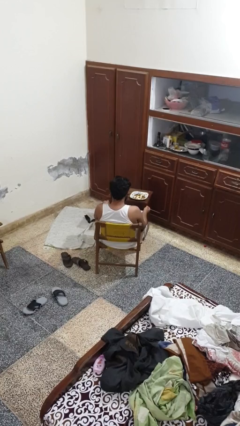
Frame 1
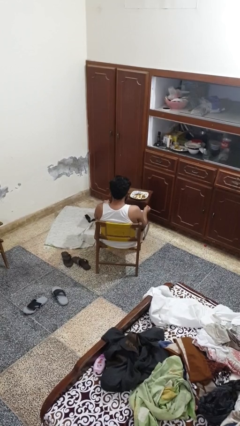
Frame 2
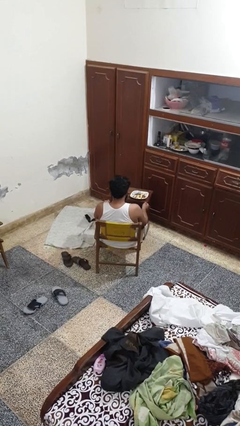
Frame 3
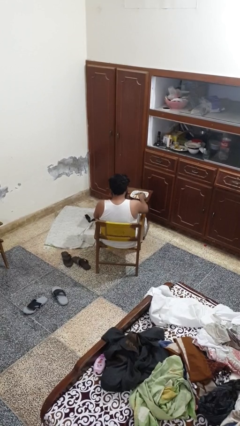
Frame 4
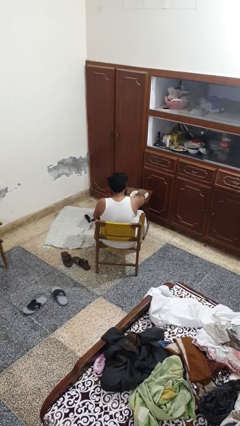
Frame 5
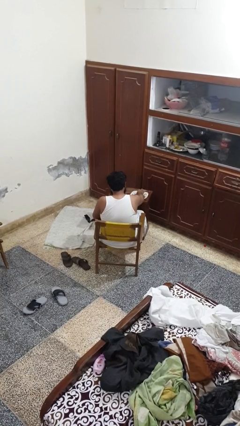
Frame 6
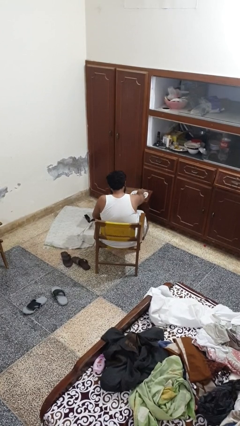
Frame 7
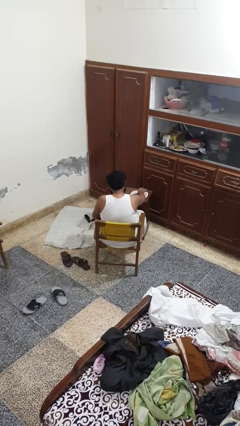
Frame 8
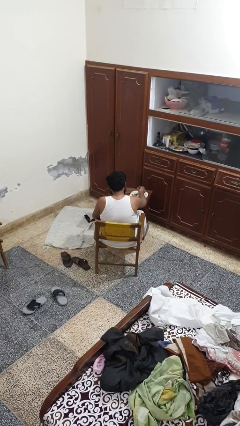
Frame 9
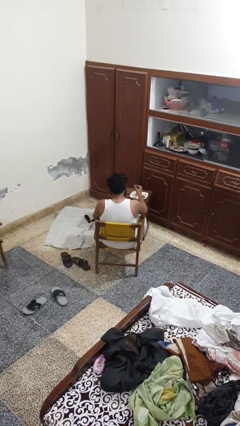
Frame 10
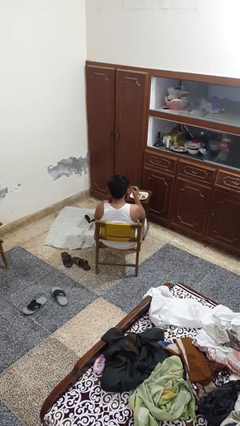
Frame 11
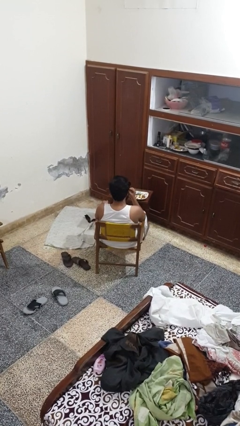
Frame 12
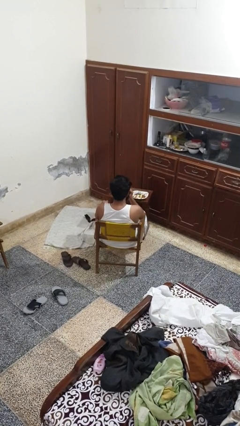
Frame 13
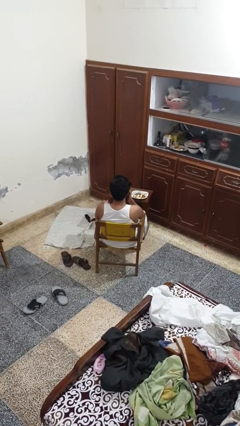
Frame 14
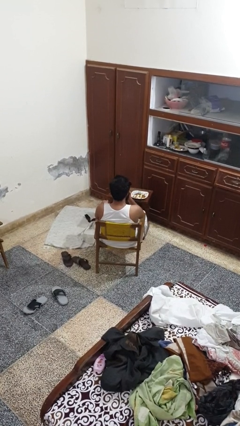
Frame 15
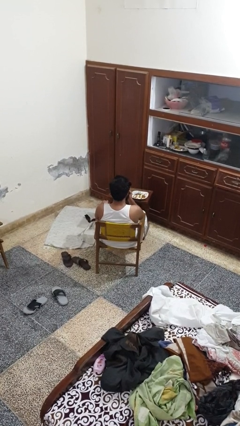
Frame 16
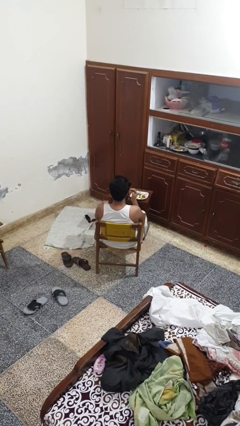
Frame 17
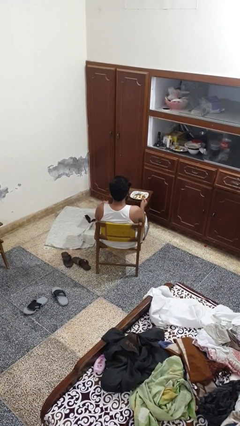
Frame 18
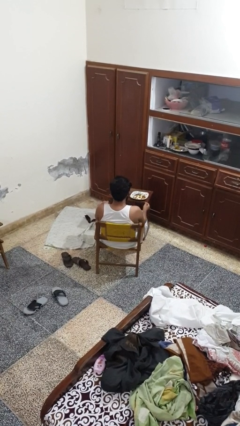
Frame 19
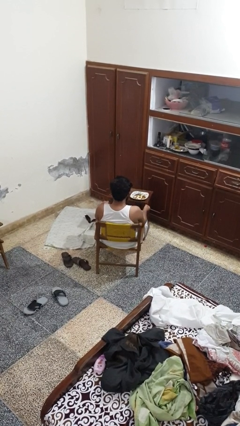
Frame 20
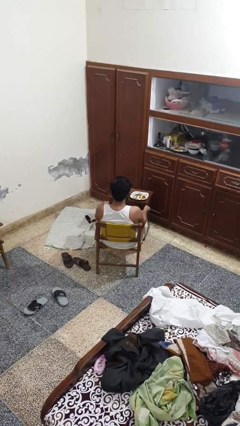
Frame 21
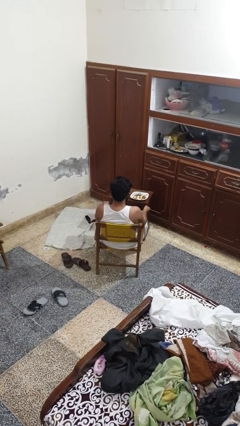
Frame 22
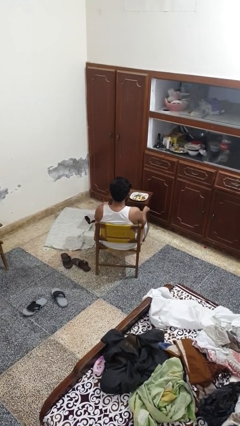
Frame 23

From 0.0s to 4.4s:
person eats with hands

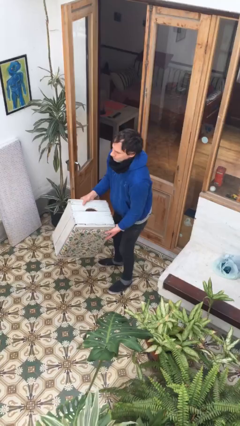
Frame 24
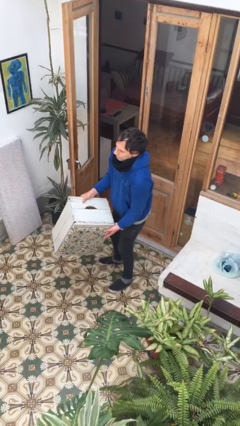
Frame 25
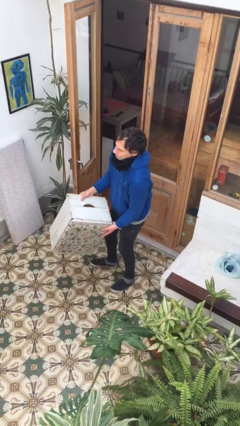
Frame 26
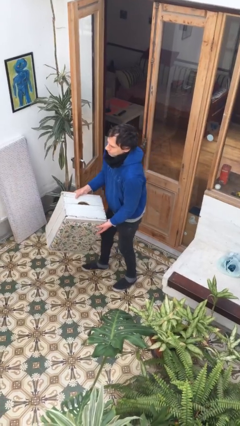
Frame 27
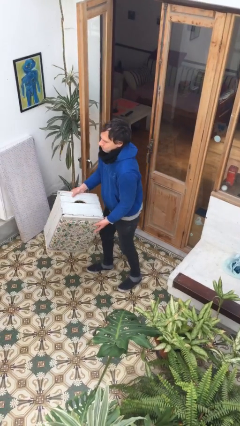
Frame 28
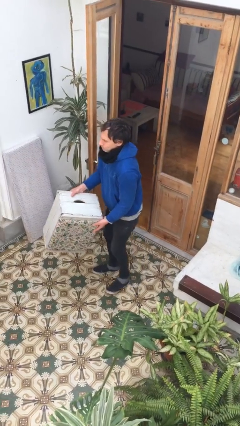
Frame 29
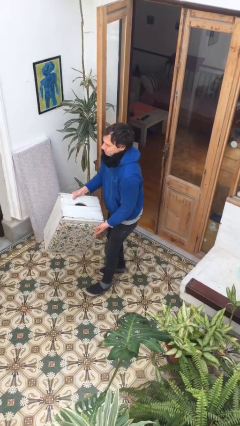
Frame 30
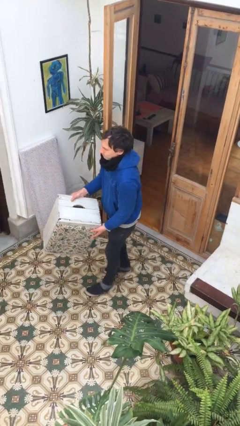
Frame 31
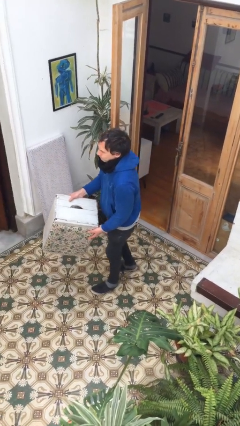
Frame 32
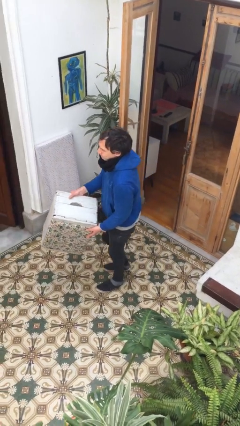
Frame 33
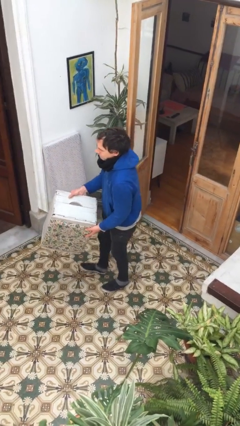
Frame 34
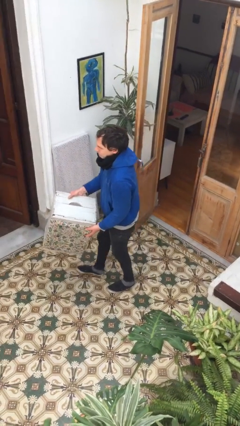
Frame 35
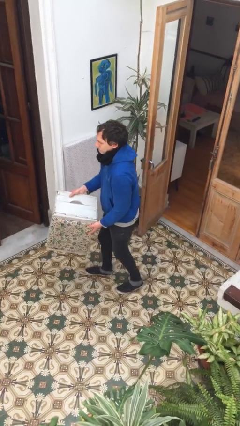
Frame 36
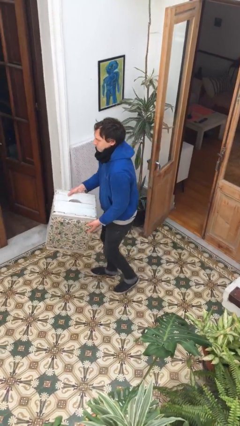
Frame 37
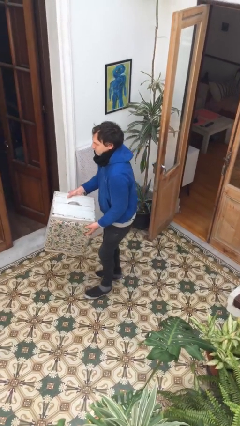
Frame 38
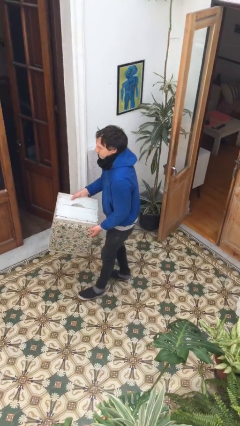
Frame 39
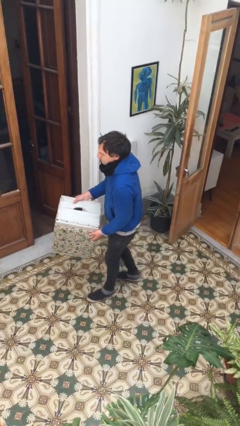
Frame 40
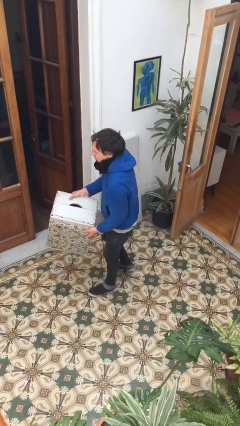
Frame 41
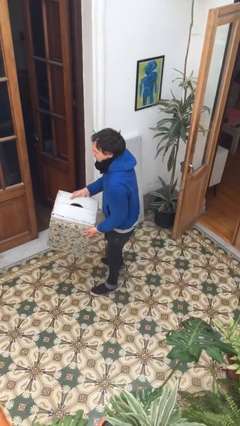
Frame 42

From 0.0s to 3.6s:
person carries heavy object

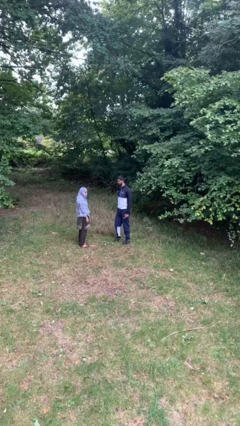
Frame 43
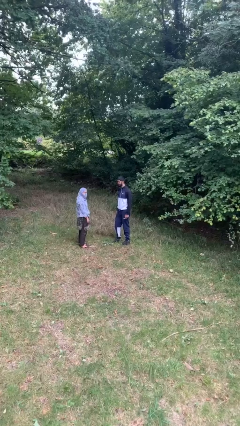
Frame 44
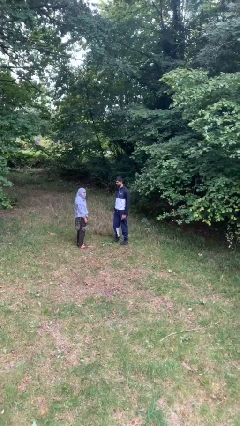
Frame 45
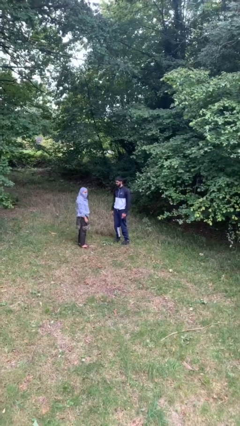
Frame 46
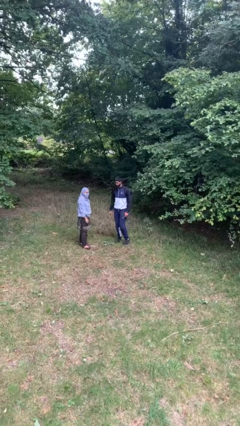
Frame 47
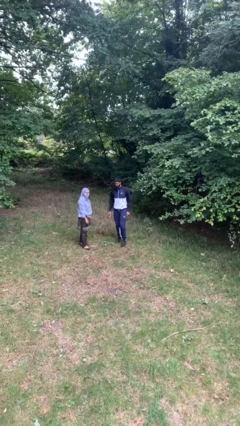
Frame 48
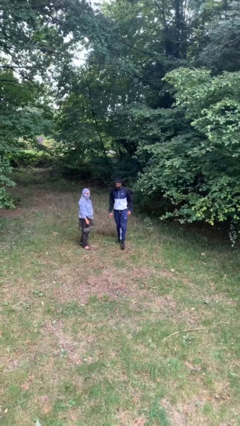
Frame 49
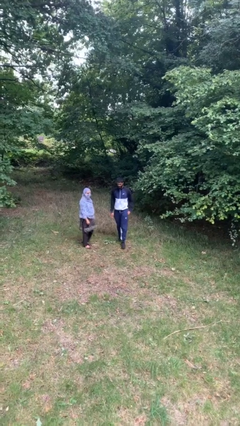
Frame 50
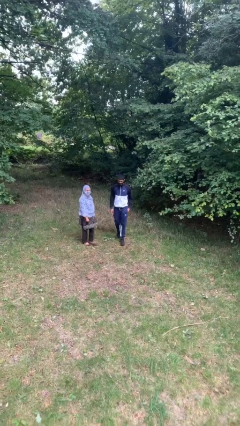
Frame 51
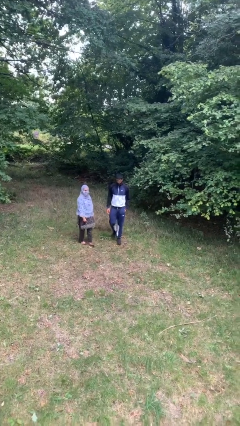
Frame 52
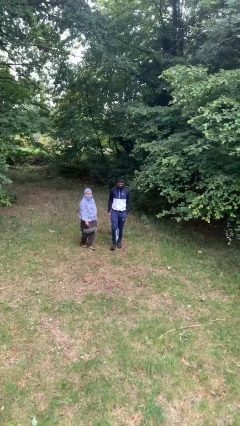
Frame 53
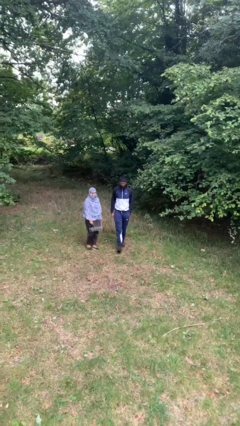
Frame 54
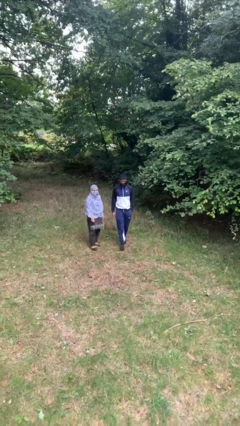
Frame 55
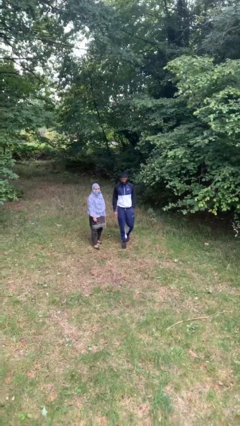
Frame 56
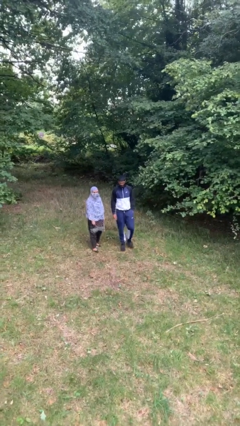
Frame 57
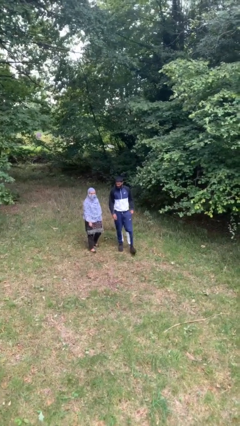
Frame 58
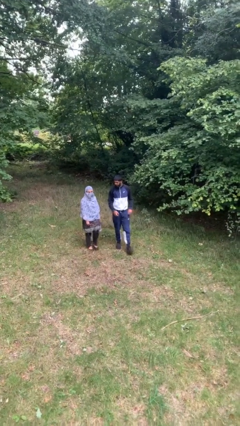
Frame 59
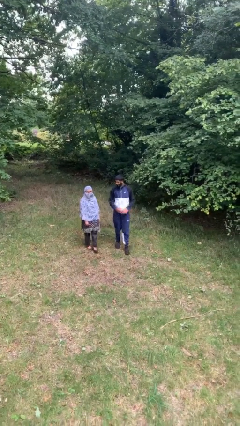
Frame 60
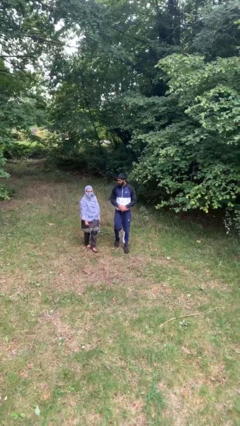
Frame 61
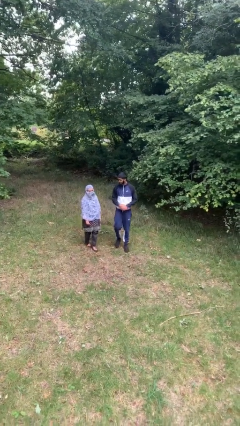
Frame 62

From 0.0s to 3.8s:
person talks to person

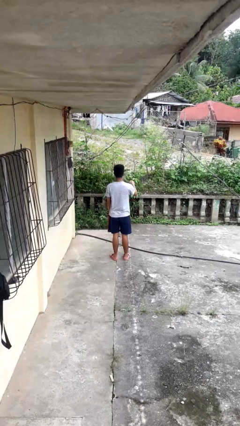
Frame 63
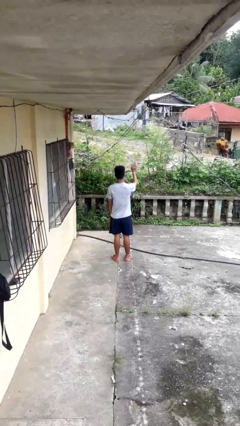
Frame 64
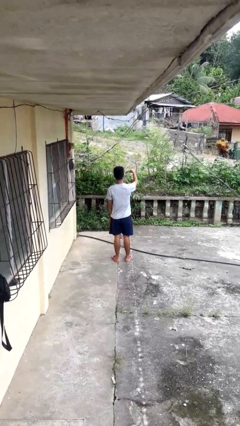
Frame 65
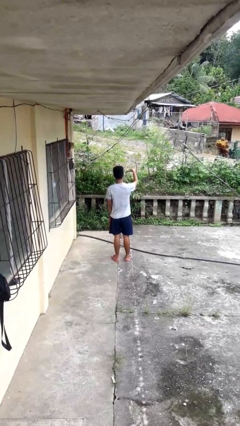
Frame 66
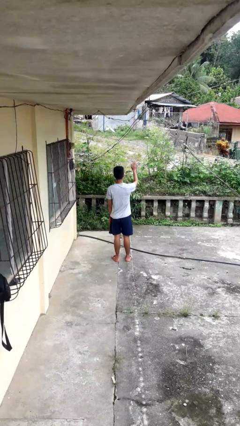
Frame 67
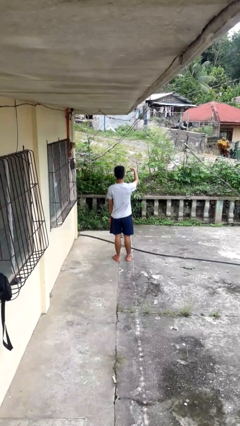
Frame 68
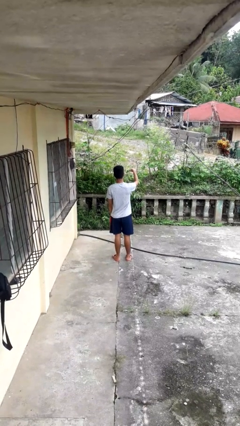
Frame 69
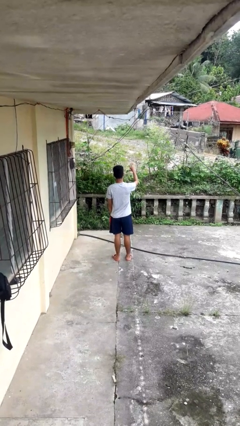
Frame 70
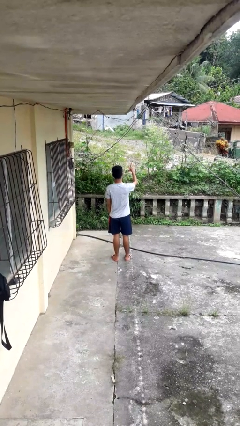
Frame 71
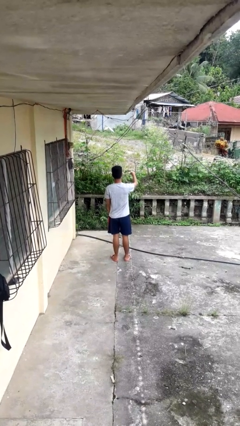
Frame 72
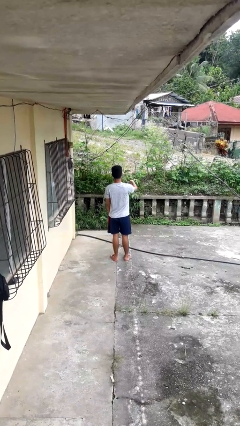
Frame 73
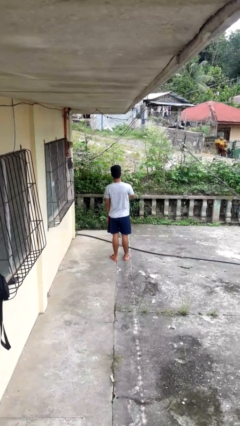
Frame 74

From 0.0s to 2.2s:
person gestures come here

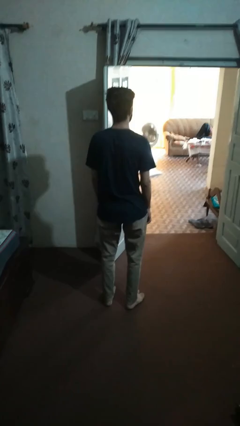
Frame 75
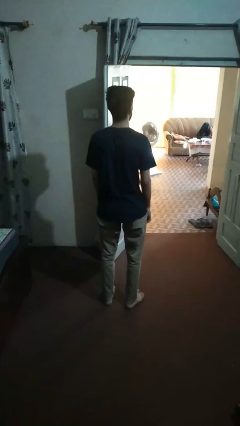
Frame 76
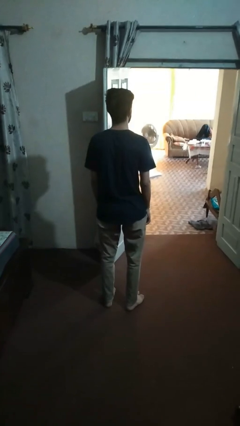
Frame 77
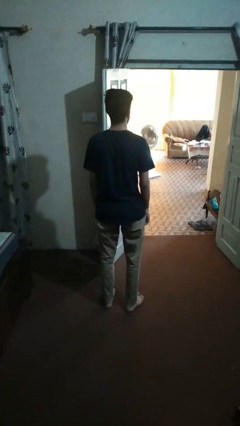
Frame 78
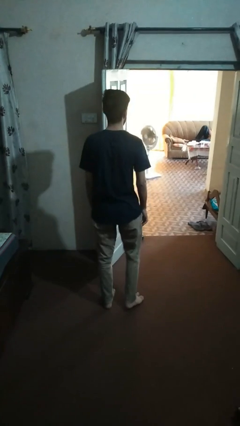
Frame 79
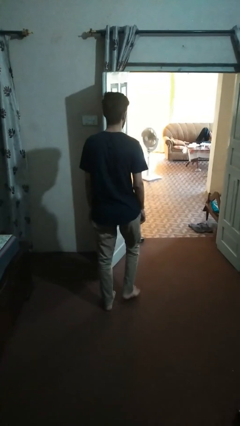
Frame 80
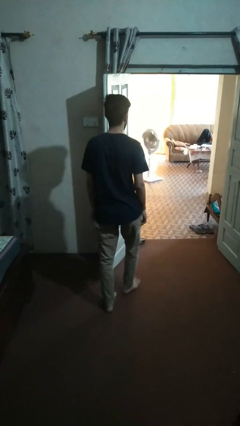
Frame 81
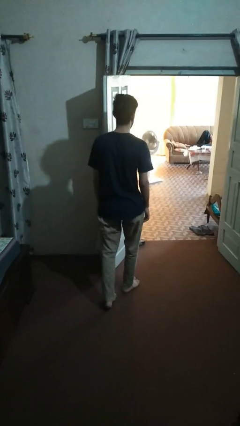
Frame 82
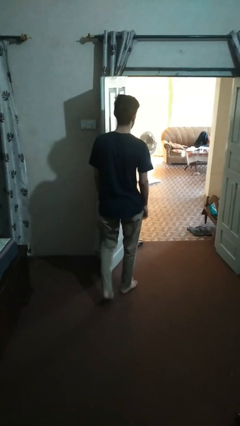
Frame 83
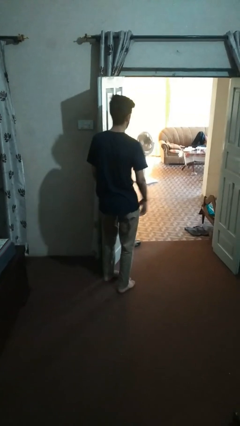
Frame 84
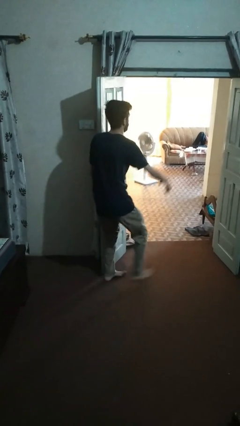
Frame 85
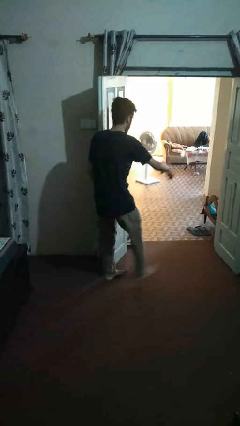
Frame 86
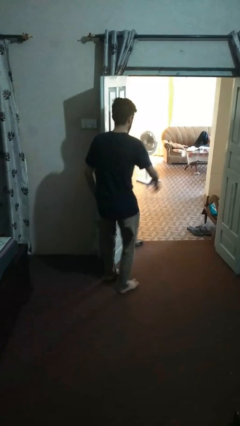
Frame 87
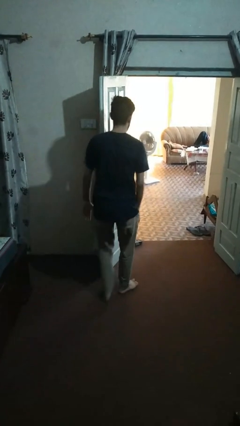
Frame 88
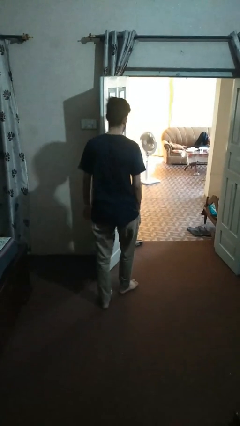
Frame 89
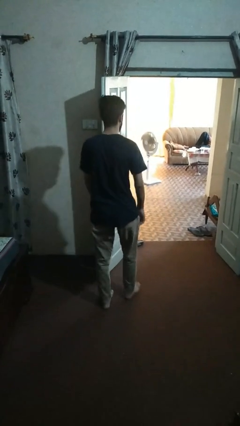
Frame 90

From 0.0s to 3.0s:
person bumps into wall

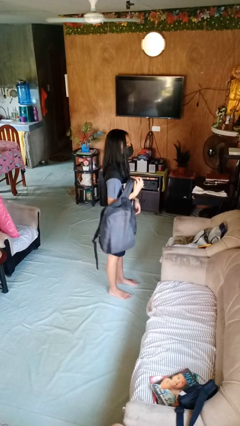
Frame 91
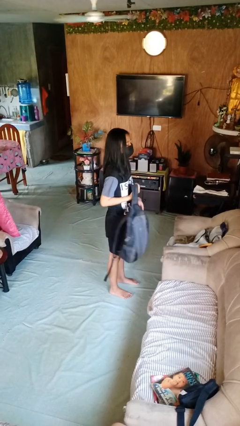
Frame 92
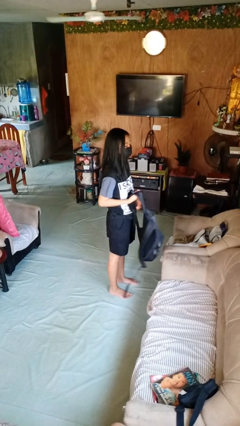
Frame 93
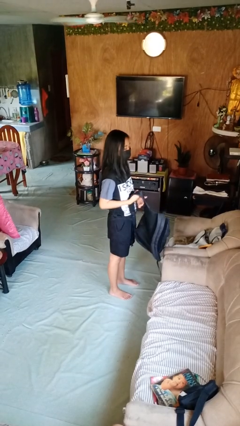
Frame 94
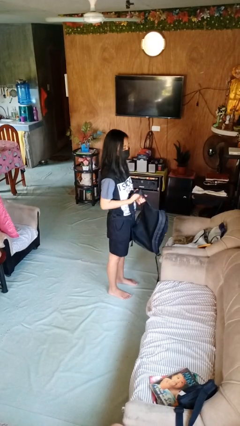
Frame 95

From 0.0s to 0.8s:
person takes off backpack
